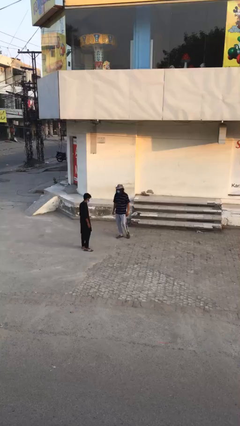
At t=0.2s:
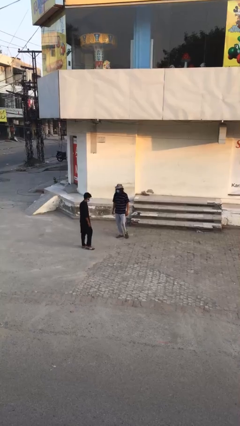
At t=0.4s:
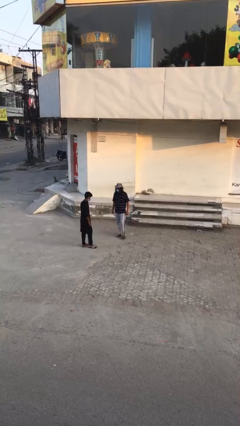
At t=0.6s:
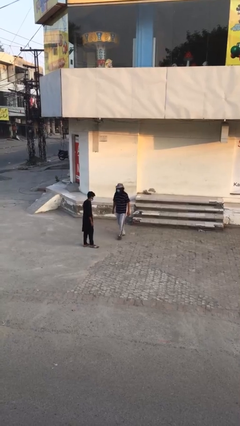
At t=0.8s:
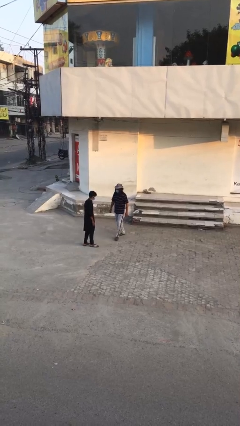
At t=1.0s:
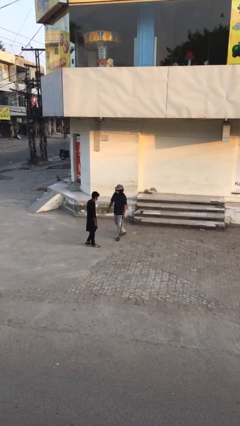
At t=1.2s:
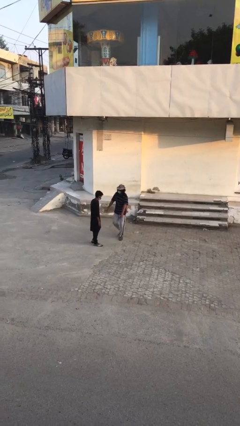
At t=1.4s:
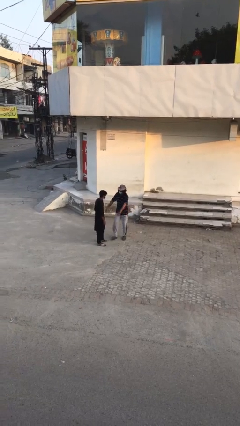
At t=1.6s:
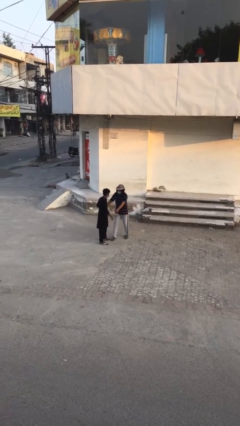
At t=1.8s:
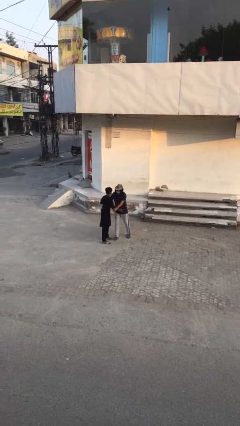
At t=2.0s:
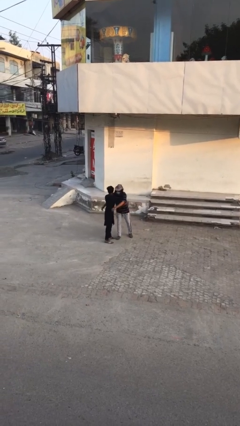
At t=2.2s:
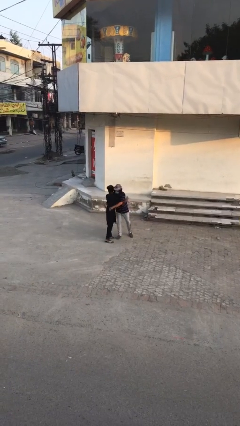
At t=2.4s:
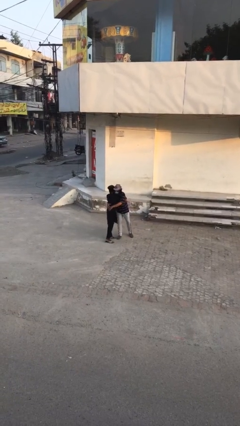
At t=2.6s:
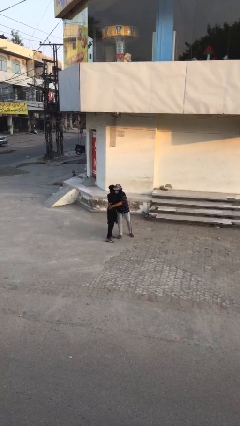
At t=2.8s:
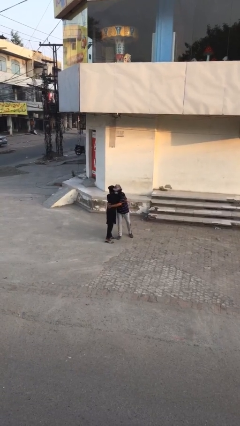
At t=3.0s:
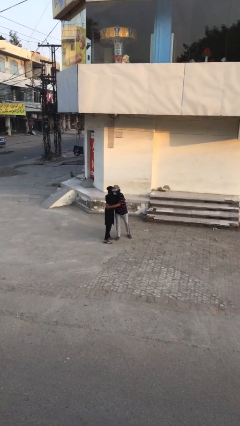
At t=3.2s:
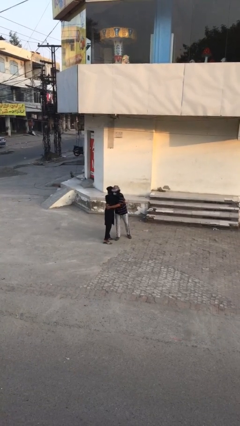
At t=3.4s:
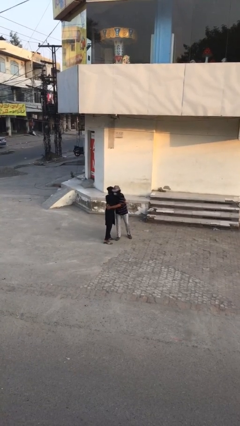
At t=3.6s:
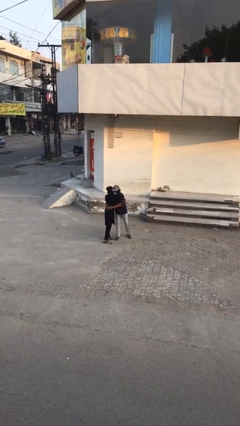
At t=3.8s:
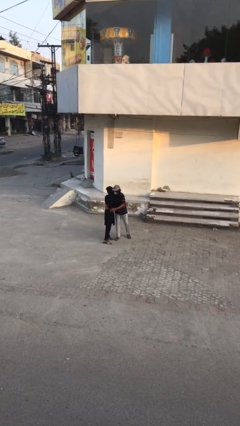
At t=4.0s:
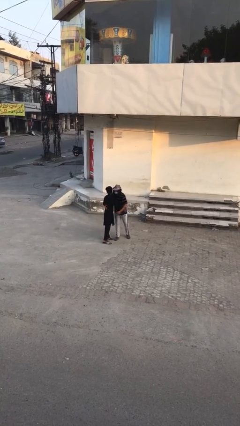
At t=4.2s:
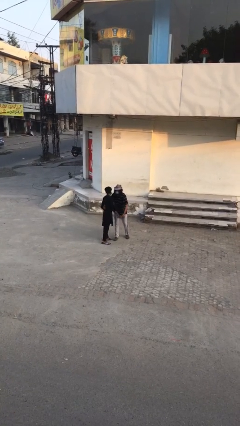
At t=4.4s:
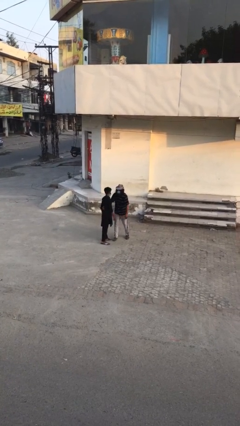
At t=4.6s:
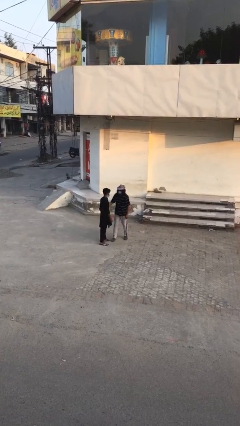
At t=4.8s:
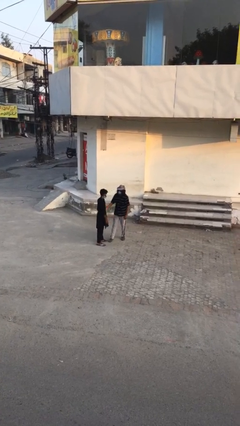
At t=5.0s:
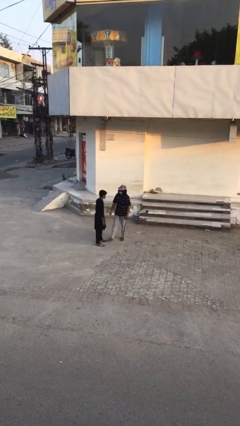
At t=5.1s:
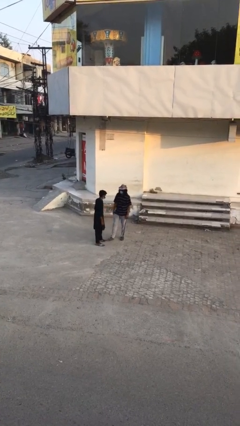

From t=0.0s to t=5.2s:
person embraces person

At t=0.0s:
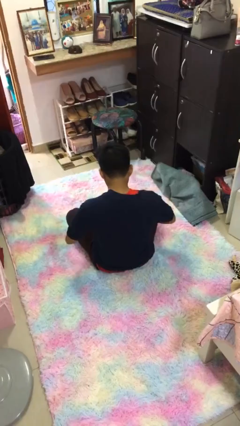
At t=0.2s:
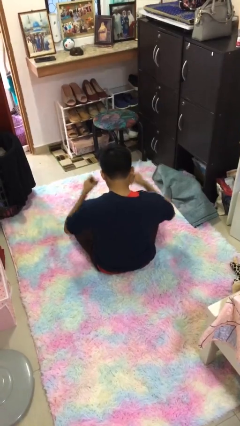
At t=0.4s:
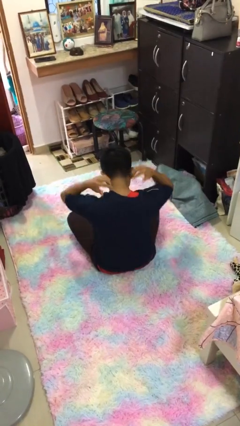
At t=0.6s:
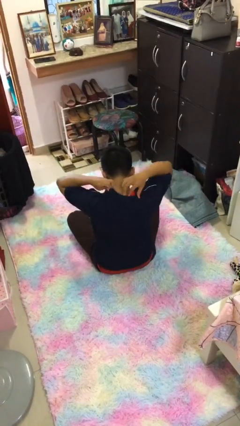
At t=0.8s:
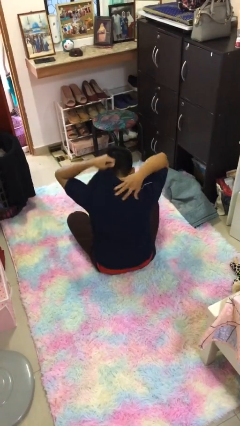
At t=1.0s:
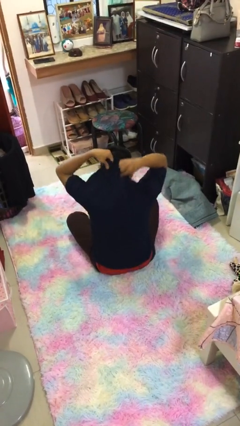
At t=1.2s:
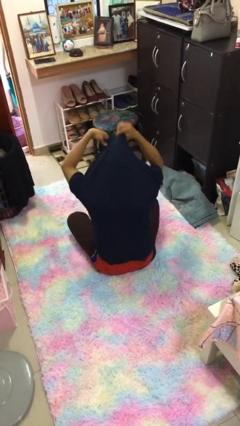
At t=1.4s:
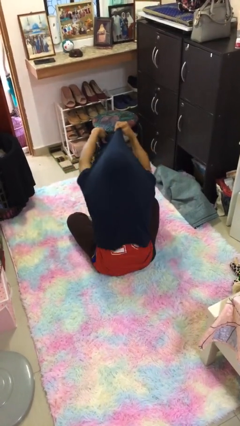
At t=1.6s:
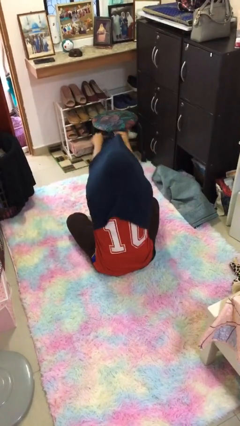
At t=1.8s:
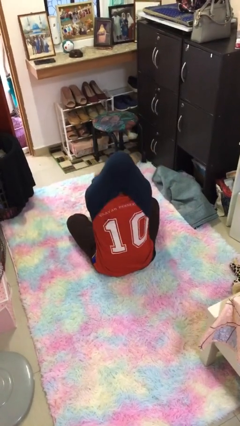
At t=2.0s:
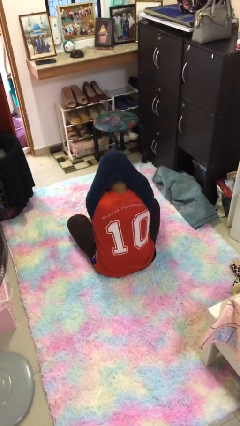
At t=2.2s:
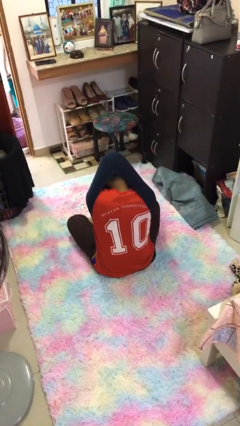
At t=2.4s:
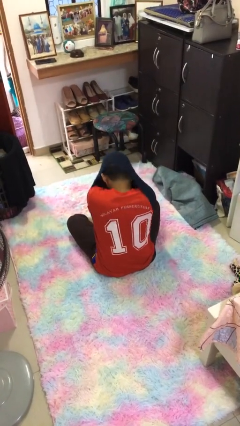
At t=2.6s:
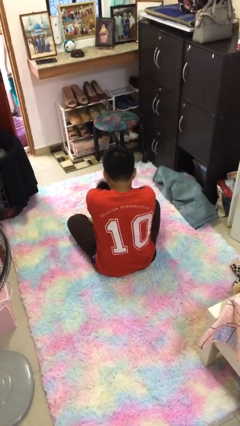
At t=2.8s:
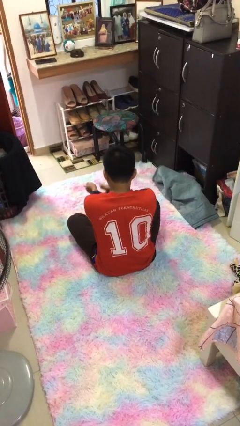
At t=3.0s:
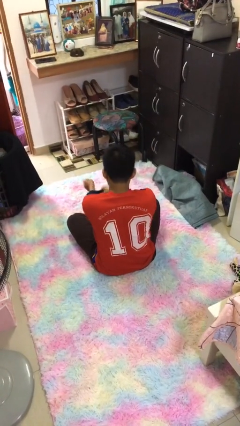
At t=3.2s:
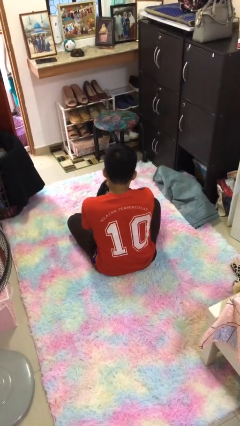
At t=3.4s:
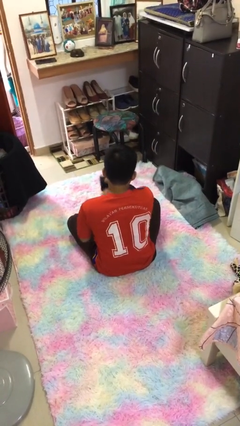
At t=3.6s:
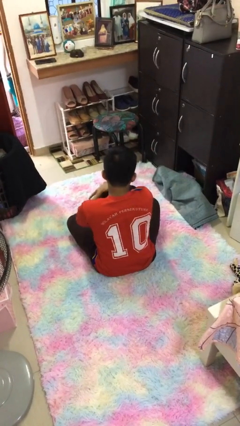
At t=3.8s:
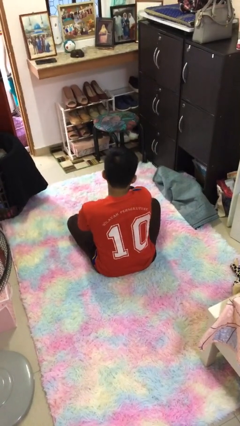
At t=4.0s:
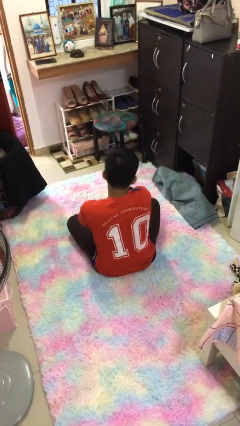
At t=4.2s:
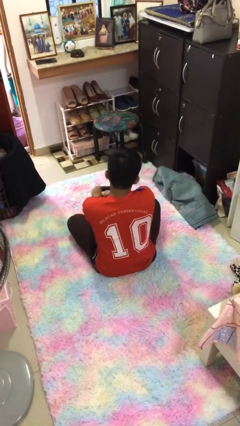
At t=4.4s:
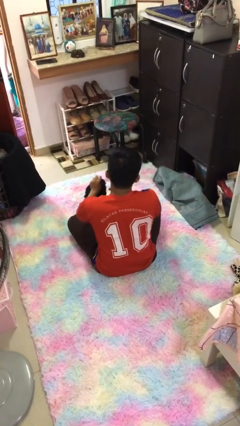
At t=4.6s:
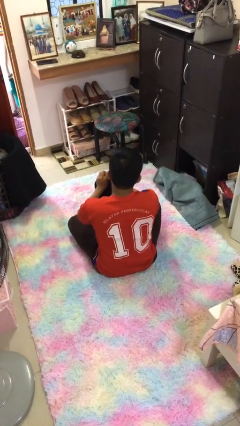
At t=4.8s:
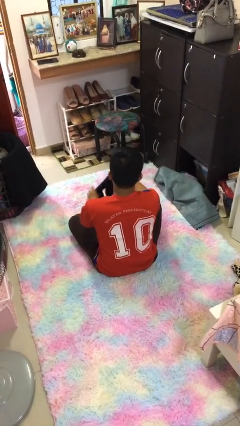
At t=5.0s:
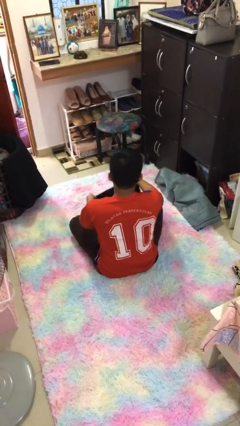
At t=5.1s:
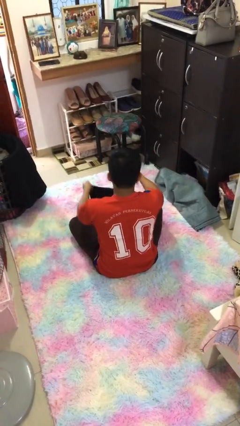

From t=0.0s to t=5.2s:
person takes off shirt

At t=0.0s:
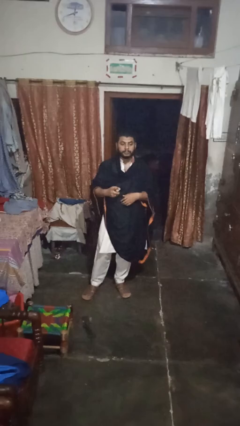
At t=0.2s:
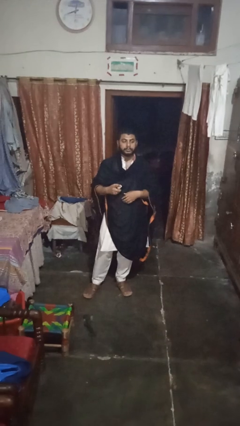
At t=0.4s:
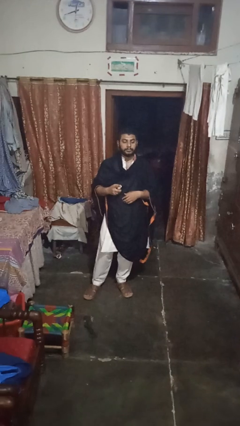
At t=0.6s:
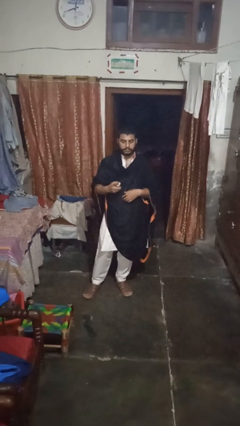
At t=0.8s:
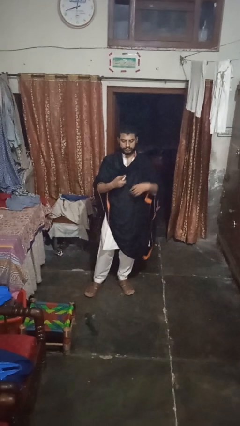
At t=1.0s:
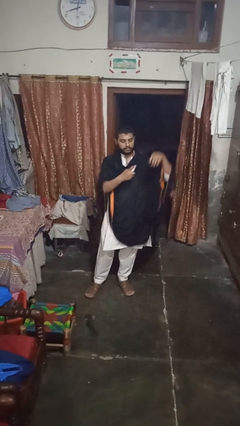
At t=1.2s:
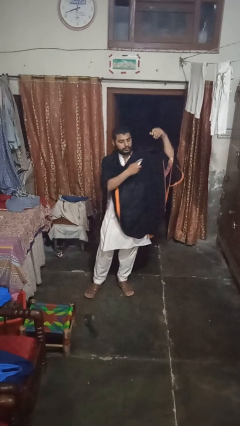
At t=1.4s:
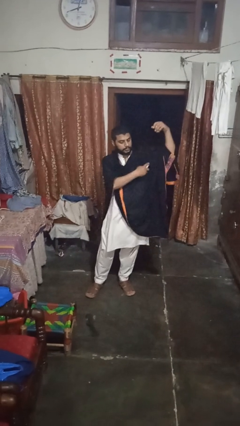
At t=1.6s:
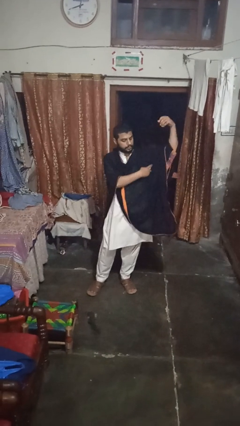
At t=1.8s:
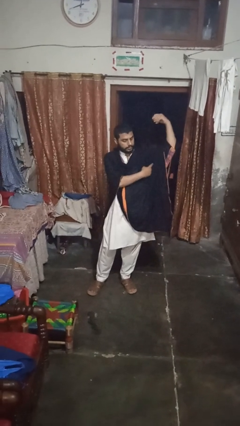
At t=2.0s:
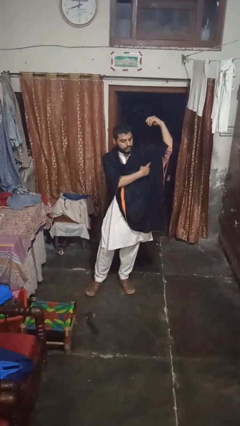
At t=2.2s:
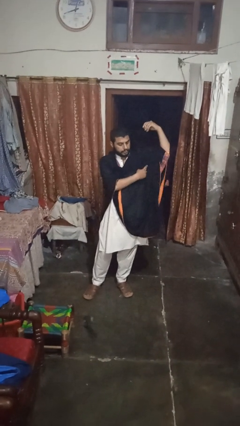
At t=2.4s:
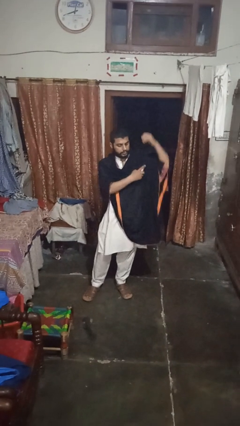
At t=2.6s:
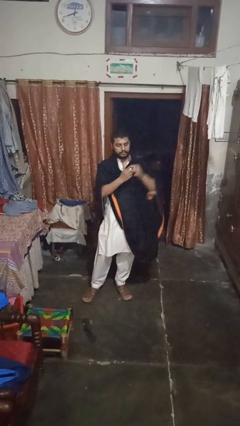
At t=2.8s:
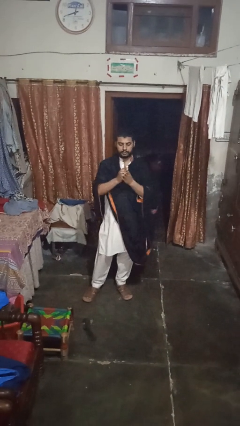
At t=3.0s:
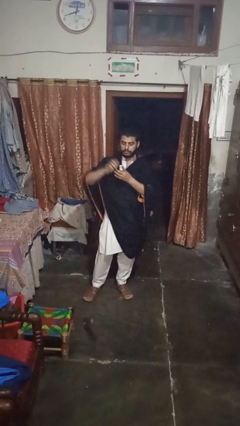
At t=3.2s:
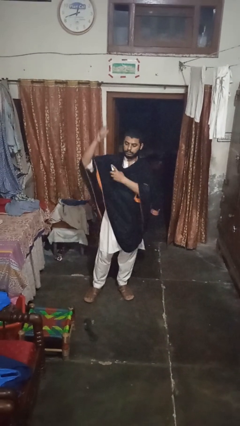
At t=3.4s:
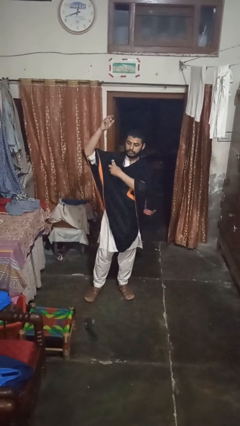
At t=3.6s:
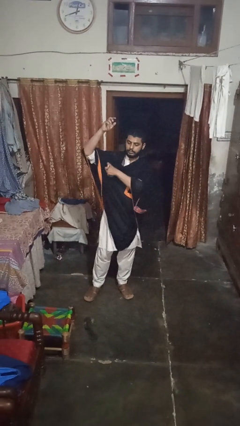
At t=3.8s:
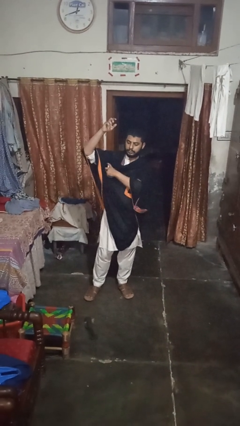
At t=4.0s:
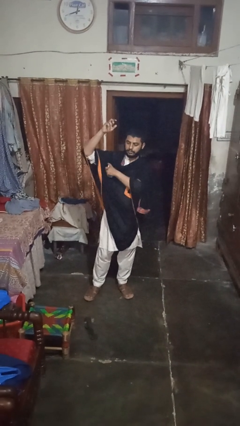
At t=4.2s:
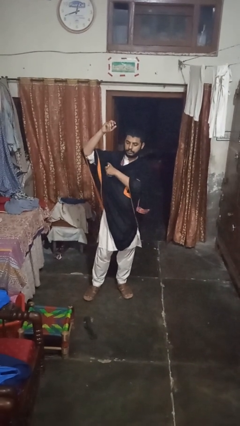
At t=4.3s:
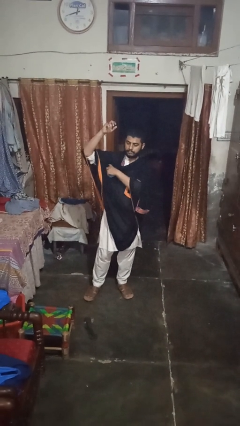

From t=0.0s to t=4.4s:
person applies deodorant

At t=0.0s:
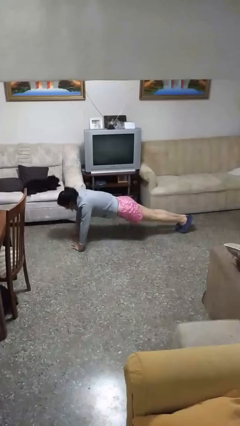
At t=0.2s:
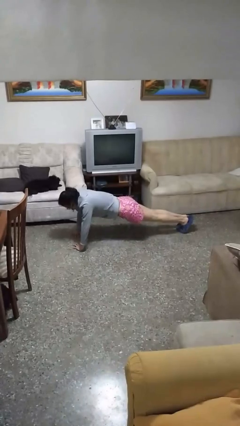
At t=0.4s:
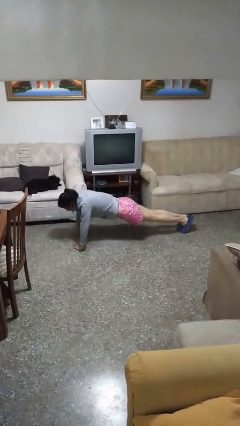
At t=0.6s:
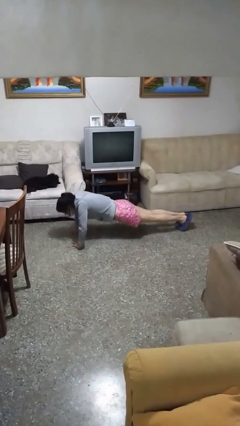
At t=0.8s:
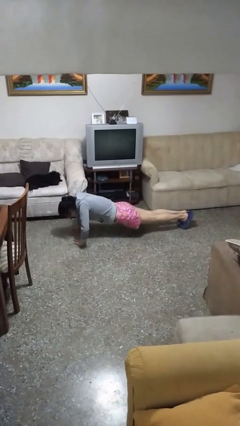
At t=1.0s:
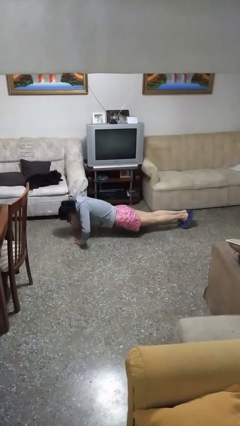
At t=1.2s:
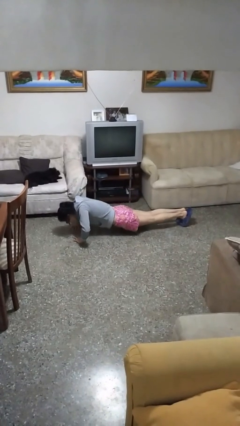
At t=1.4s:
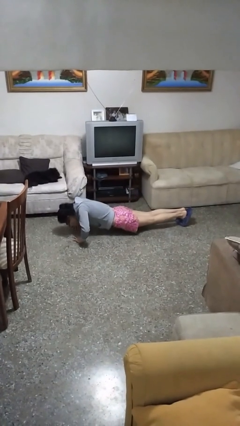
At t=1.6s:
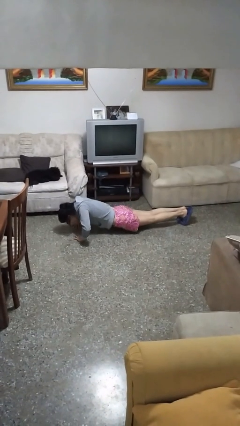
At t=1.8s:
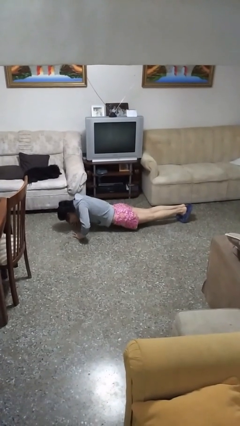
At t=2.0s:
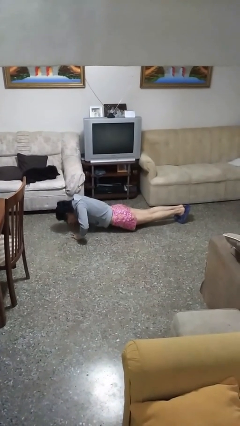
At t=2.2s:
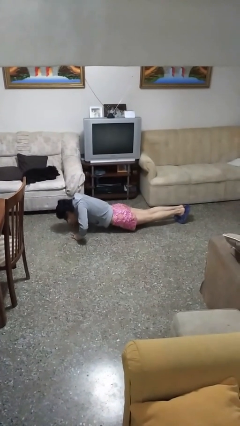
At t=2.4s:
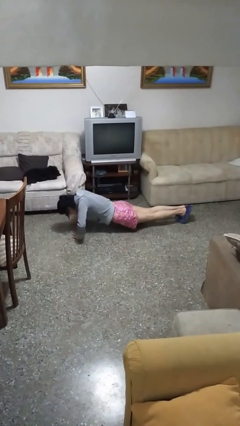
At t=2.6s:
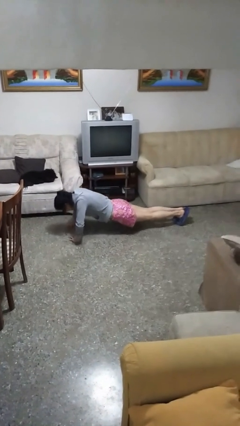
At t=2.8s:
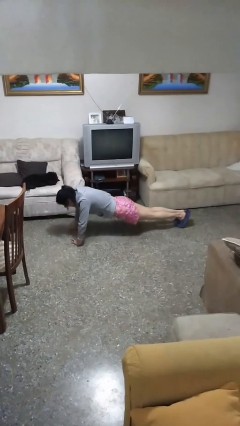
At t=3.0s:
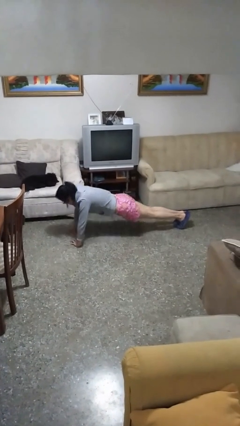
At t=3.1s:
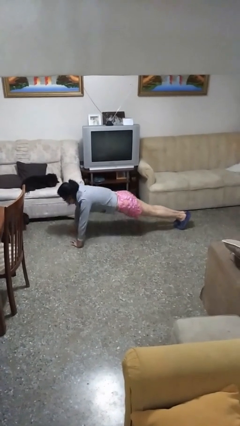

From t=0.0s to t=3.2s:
person exercises with pushup
